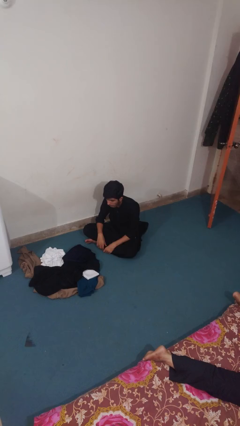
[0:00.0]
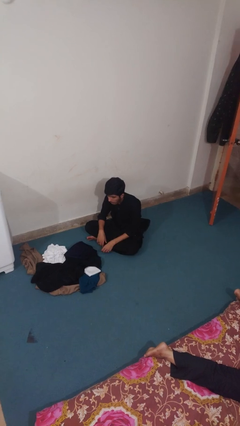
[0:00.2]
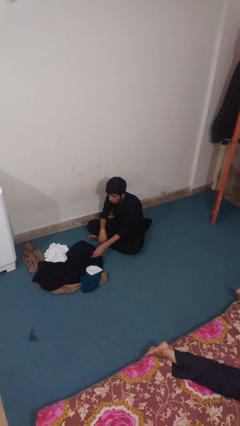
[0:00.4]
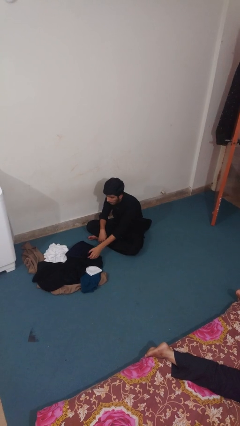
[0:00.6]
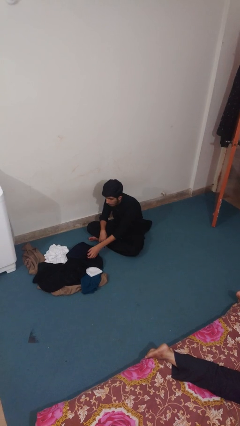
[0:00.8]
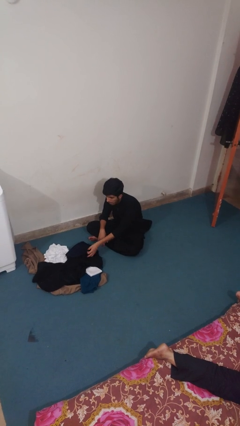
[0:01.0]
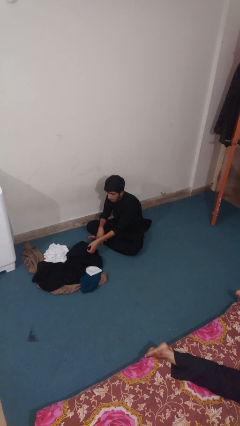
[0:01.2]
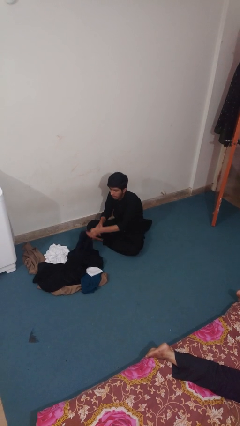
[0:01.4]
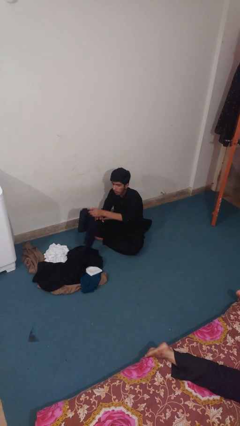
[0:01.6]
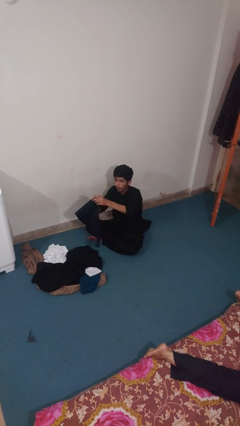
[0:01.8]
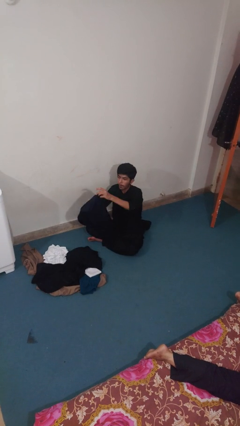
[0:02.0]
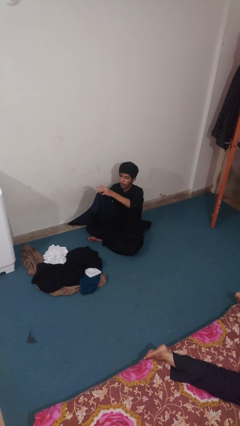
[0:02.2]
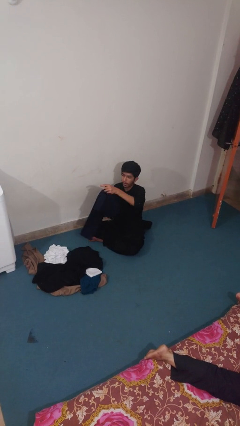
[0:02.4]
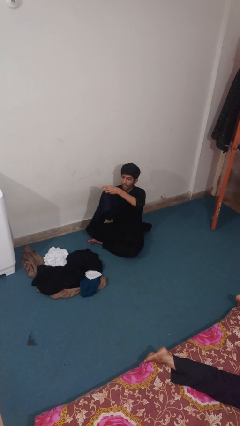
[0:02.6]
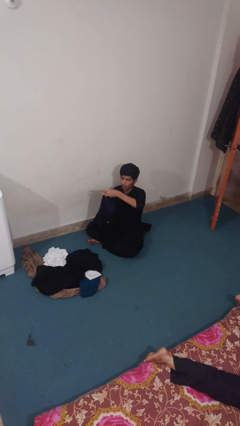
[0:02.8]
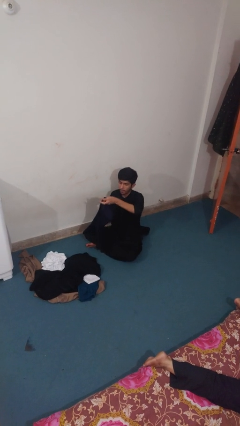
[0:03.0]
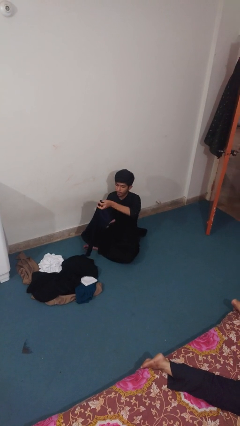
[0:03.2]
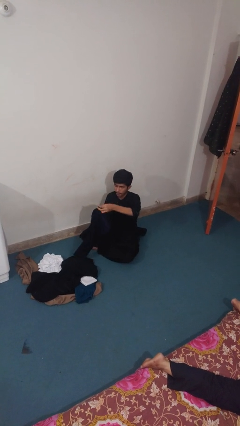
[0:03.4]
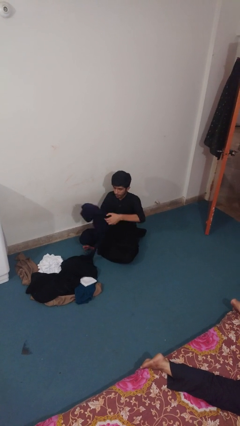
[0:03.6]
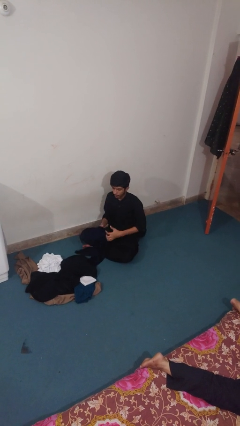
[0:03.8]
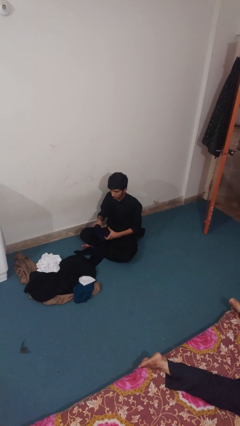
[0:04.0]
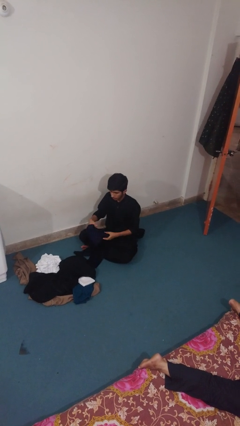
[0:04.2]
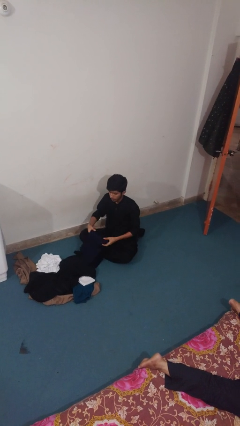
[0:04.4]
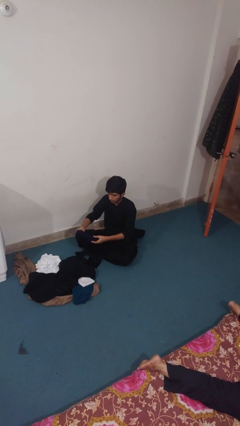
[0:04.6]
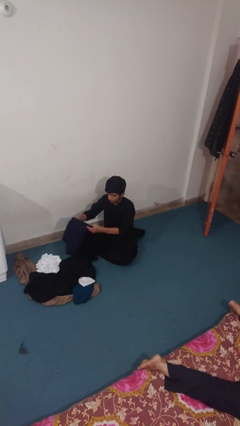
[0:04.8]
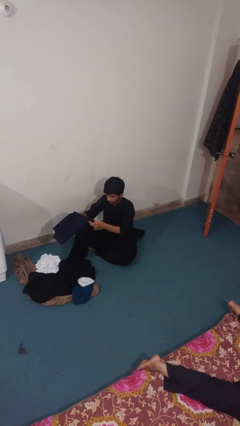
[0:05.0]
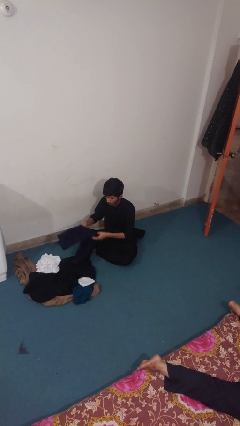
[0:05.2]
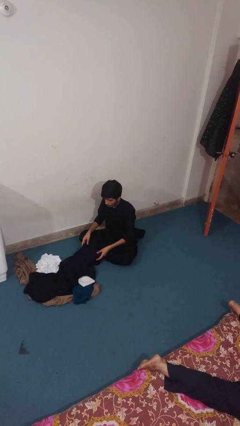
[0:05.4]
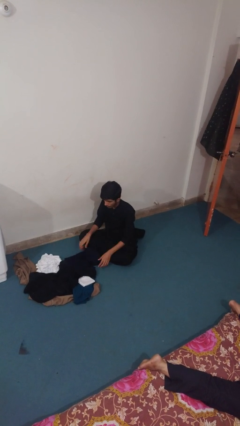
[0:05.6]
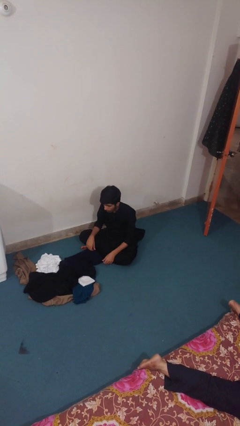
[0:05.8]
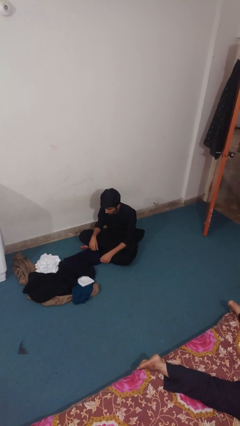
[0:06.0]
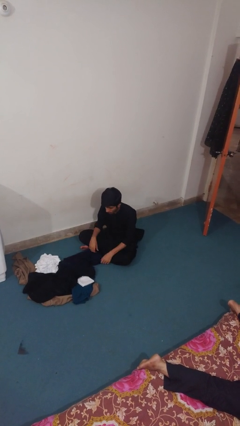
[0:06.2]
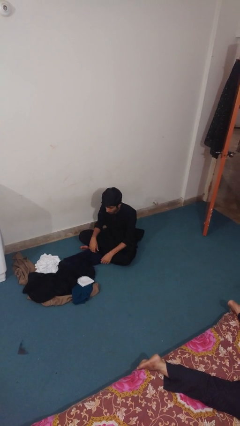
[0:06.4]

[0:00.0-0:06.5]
person folds pants

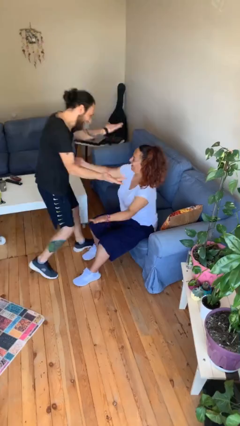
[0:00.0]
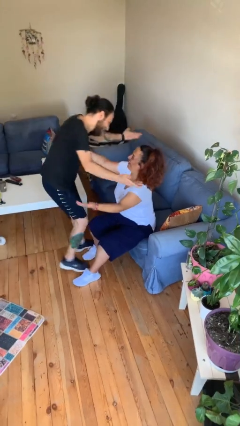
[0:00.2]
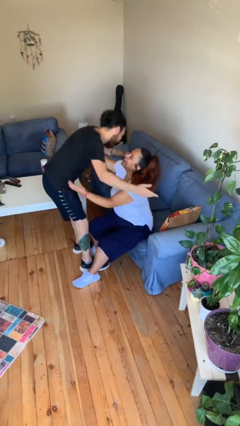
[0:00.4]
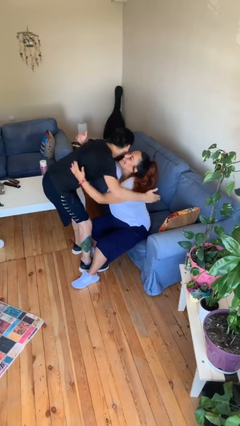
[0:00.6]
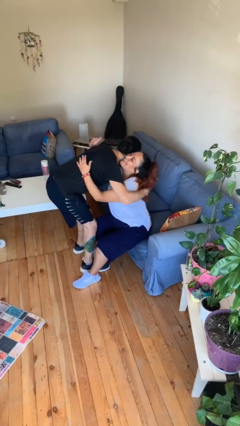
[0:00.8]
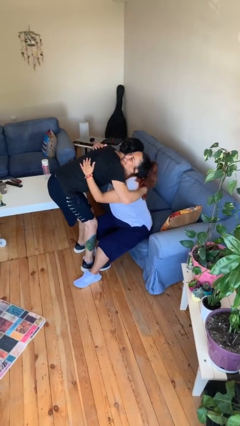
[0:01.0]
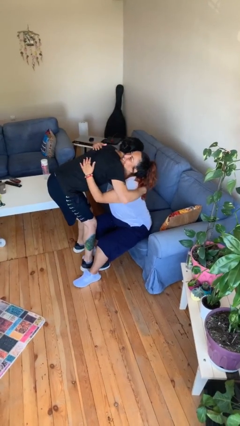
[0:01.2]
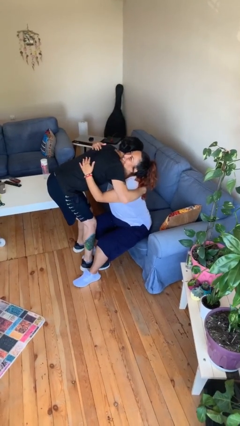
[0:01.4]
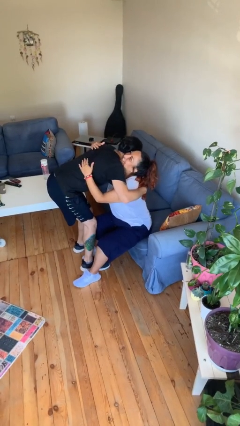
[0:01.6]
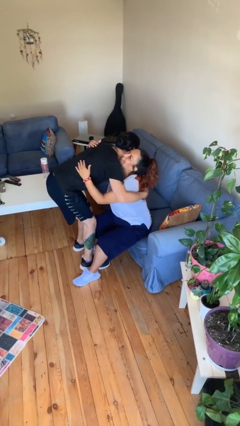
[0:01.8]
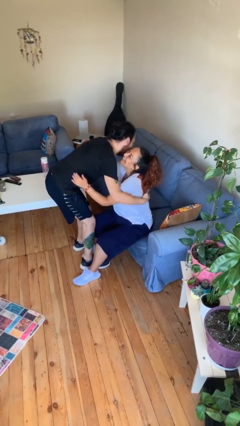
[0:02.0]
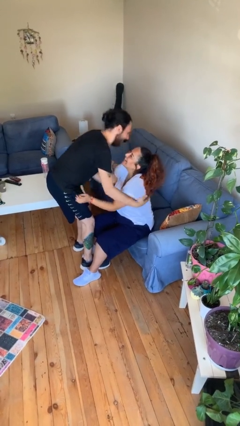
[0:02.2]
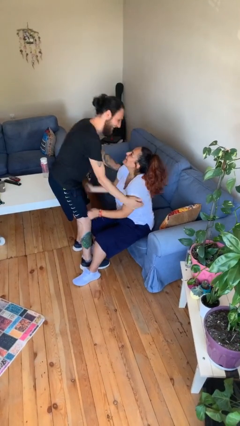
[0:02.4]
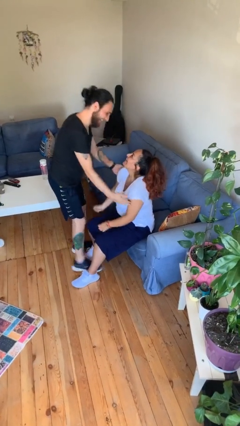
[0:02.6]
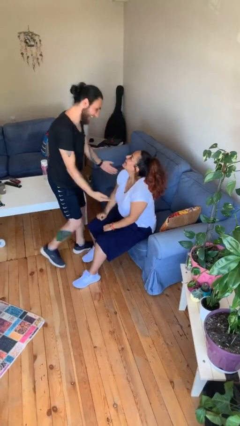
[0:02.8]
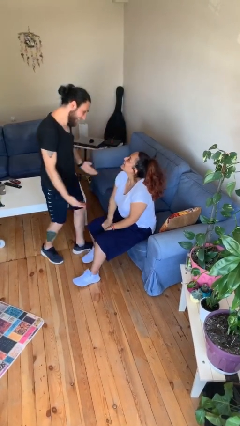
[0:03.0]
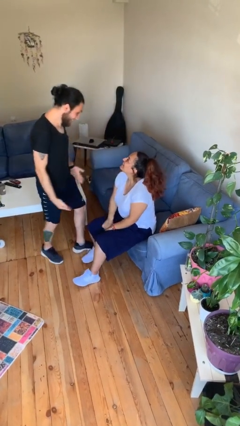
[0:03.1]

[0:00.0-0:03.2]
person embraces person

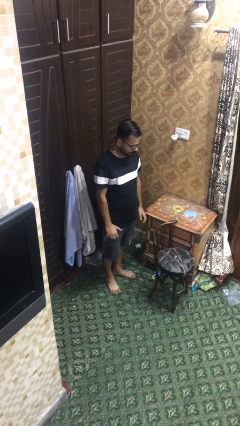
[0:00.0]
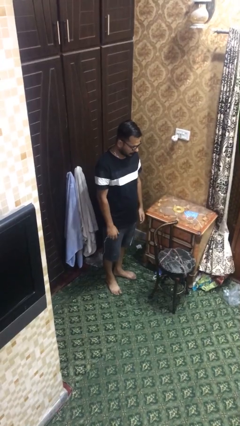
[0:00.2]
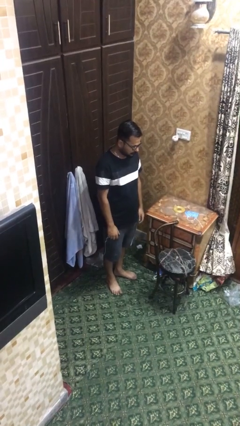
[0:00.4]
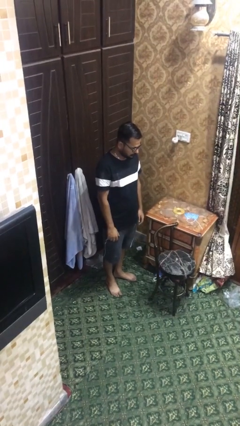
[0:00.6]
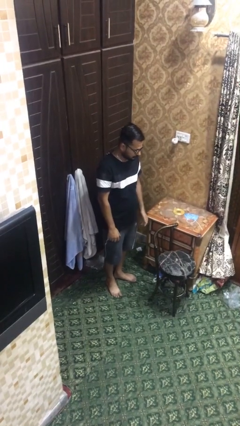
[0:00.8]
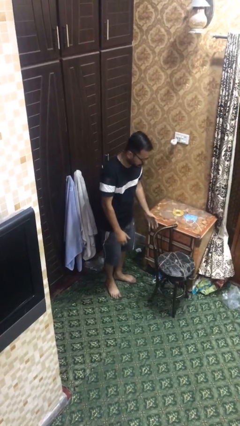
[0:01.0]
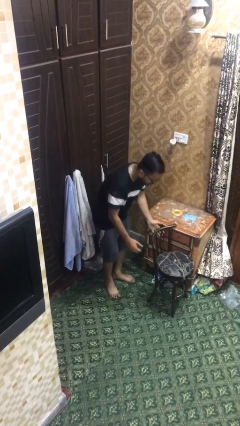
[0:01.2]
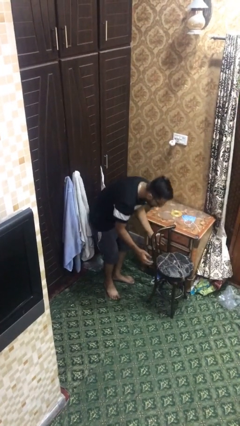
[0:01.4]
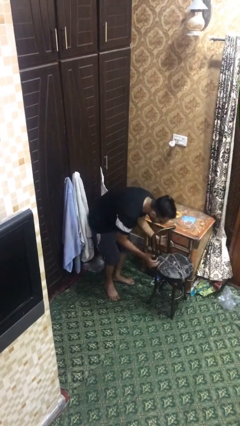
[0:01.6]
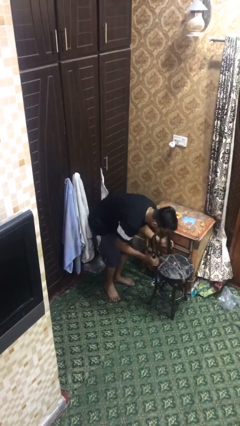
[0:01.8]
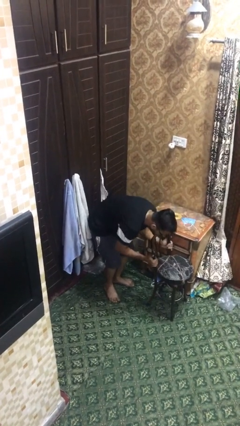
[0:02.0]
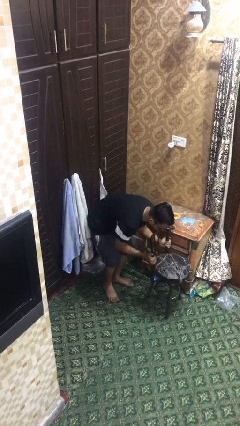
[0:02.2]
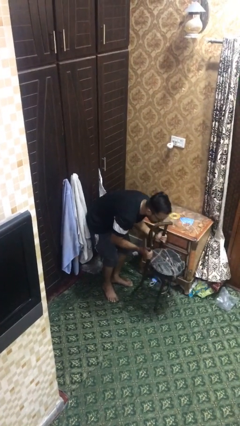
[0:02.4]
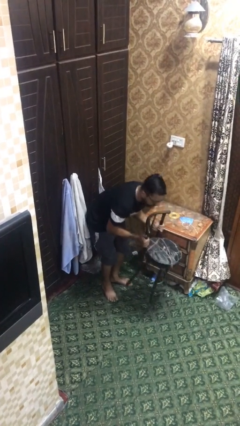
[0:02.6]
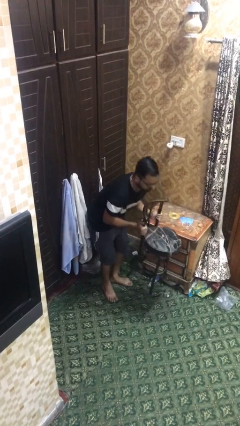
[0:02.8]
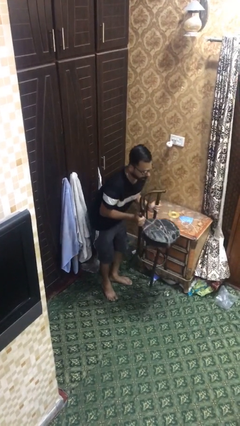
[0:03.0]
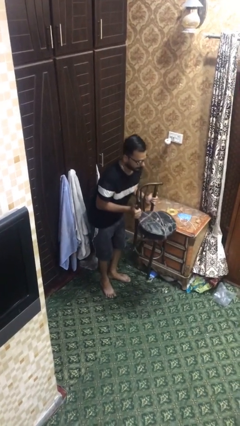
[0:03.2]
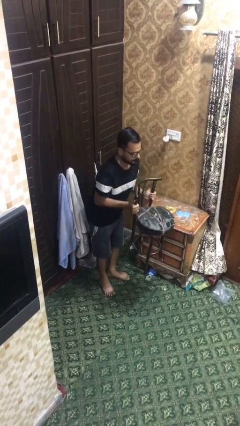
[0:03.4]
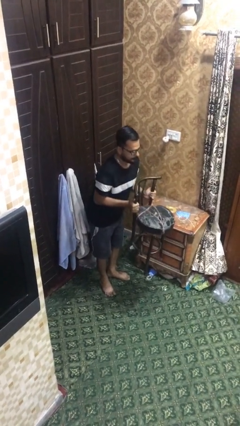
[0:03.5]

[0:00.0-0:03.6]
person picks up object from floor

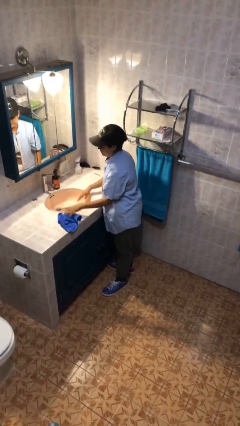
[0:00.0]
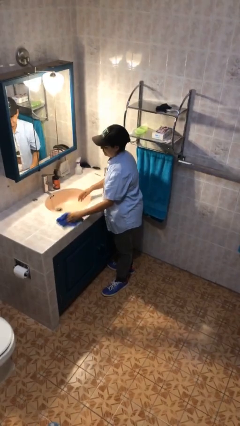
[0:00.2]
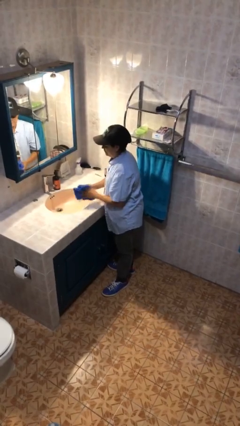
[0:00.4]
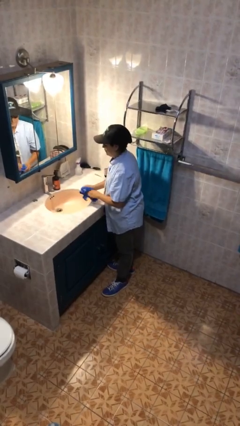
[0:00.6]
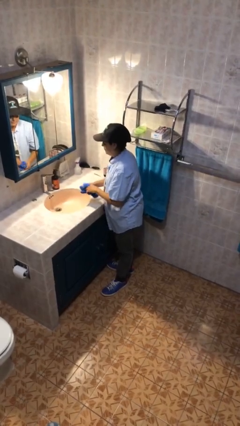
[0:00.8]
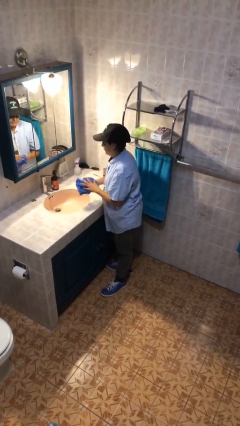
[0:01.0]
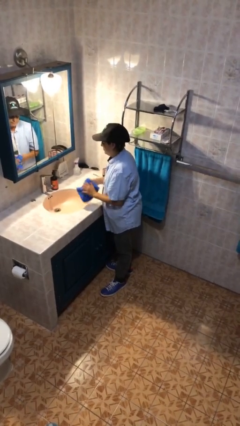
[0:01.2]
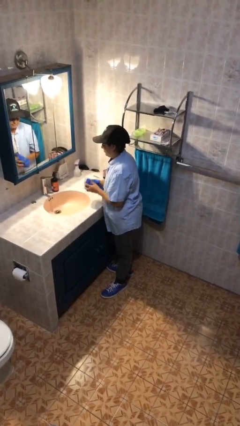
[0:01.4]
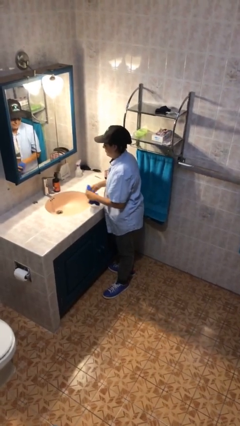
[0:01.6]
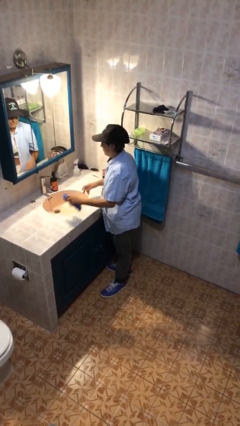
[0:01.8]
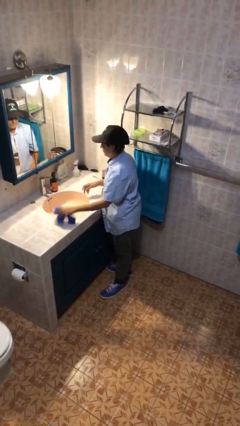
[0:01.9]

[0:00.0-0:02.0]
person dries hands with towel

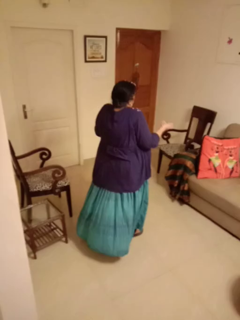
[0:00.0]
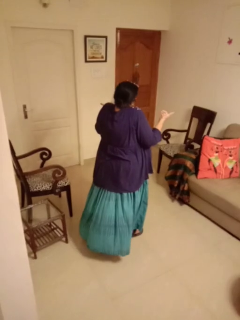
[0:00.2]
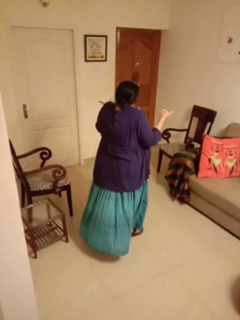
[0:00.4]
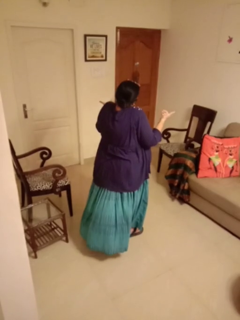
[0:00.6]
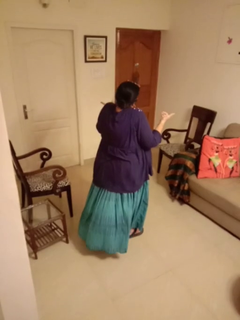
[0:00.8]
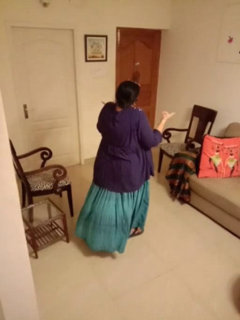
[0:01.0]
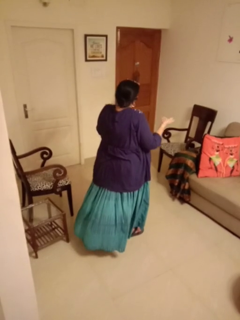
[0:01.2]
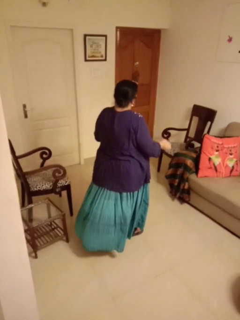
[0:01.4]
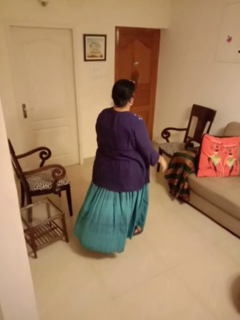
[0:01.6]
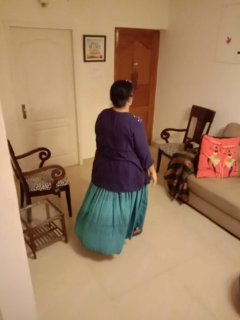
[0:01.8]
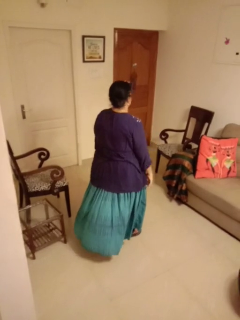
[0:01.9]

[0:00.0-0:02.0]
person shrugs

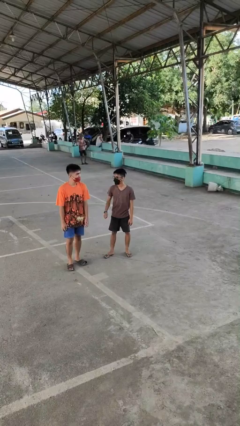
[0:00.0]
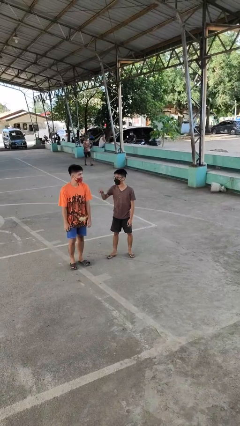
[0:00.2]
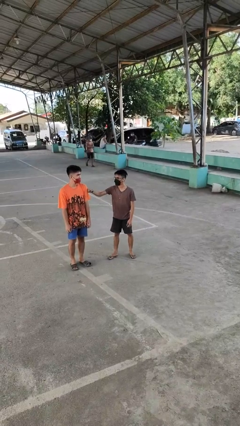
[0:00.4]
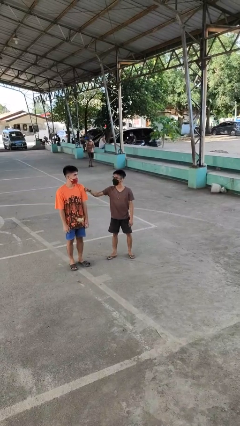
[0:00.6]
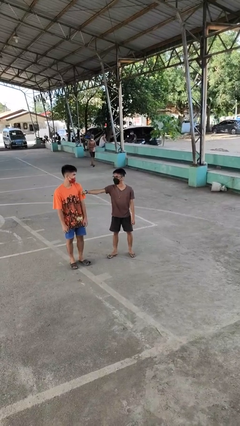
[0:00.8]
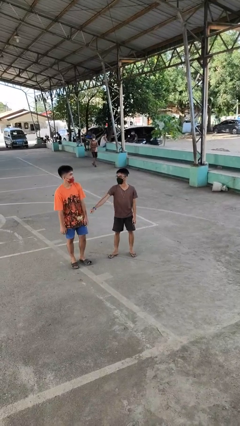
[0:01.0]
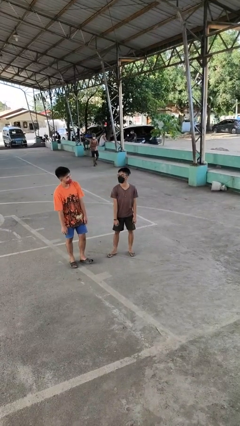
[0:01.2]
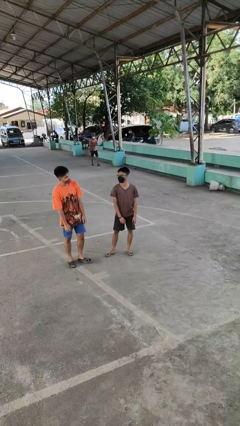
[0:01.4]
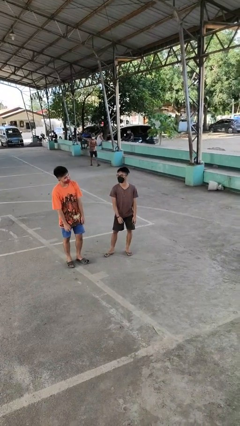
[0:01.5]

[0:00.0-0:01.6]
person pounds shoulders of person
